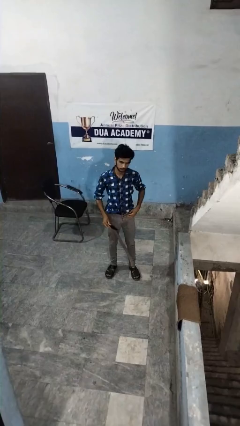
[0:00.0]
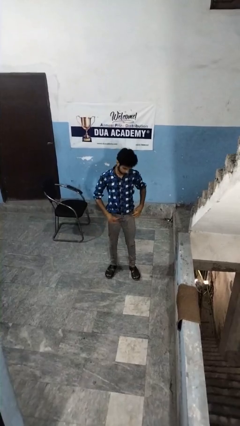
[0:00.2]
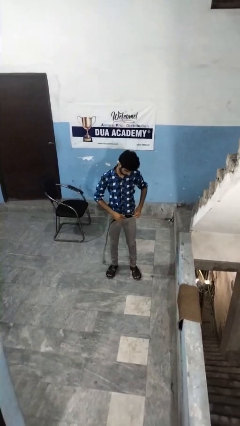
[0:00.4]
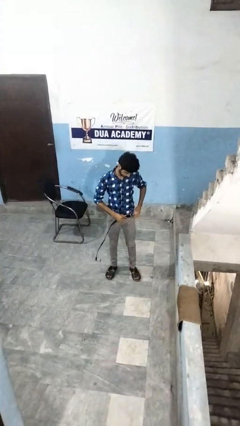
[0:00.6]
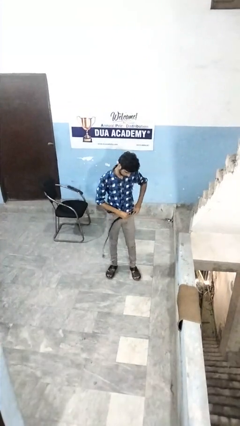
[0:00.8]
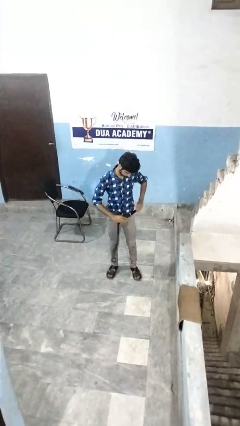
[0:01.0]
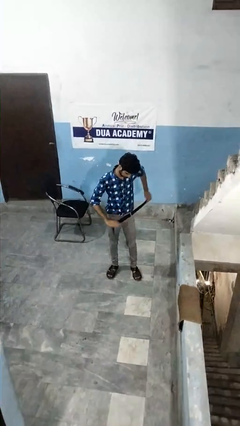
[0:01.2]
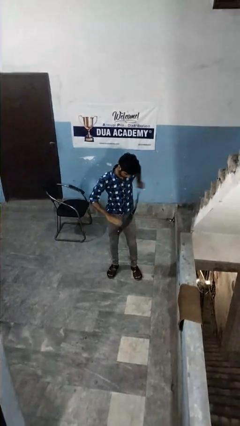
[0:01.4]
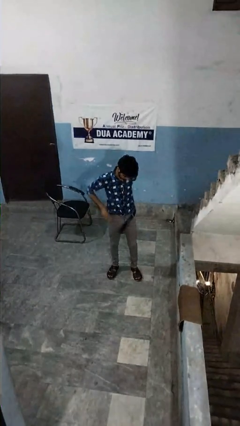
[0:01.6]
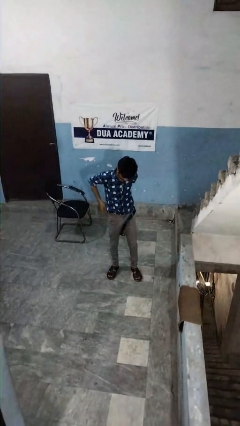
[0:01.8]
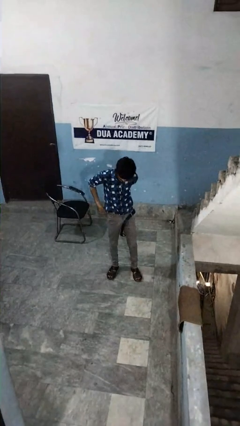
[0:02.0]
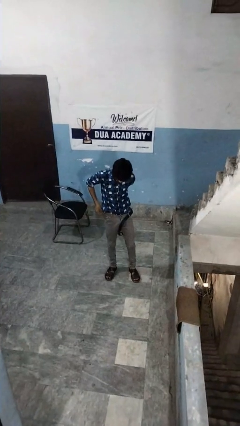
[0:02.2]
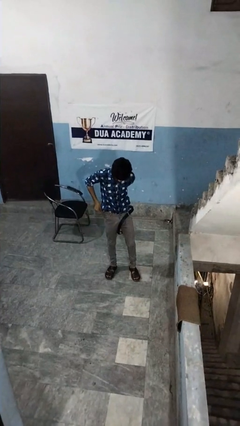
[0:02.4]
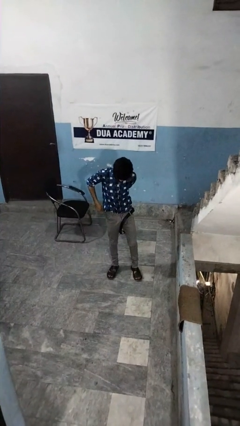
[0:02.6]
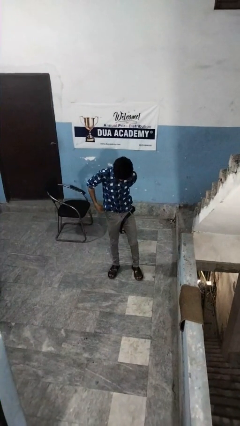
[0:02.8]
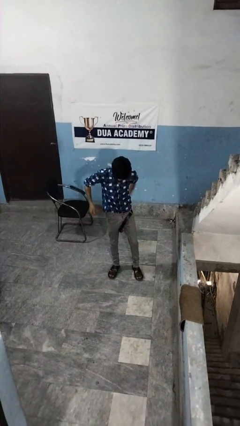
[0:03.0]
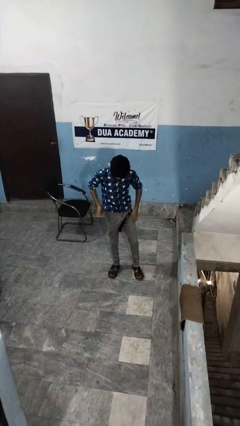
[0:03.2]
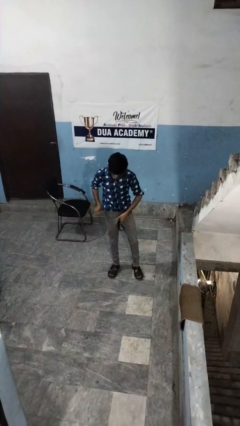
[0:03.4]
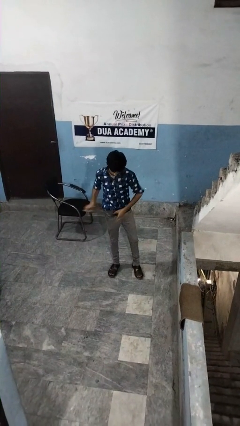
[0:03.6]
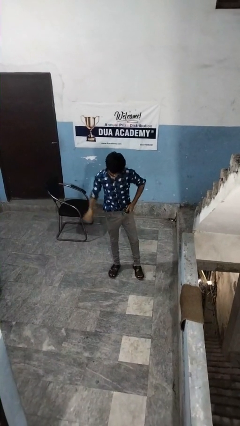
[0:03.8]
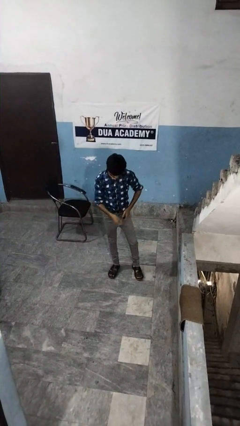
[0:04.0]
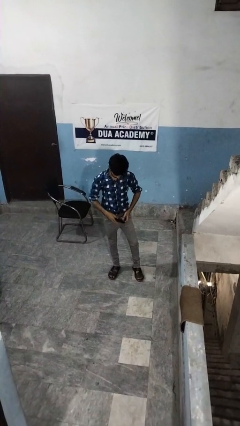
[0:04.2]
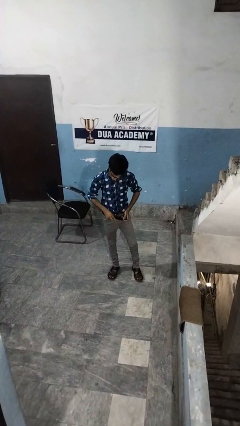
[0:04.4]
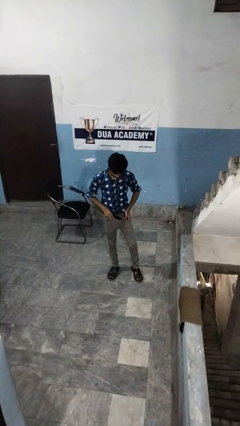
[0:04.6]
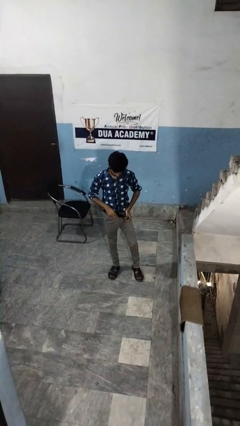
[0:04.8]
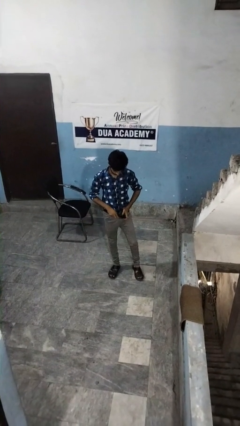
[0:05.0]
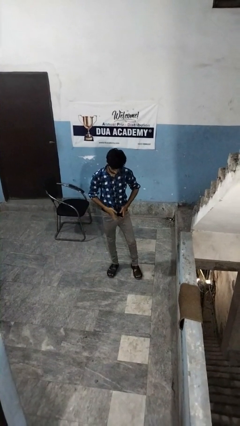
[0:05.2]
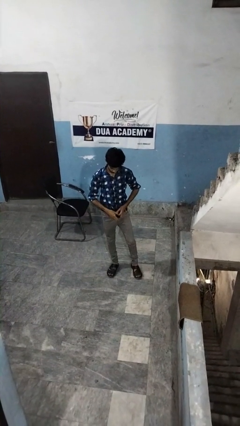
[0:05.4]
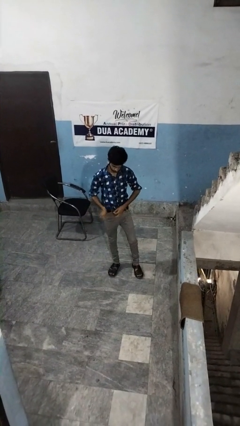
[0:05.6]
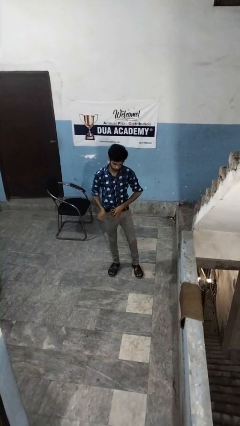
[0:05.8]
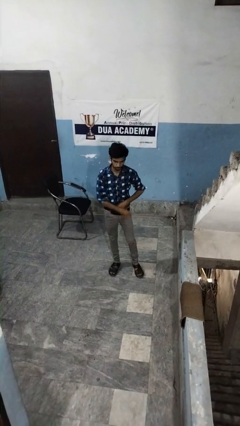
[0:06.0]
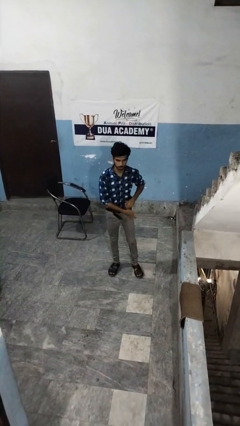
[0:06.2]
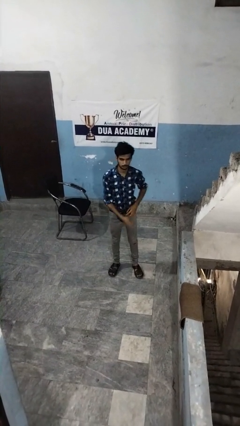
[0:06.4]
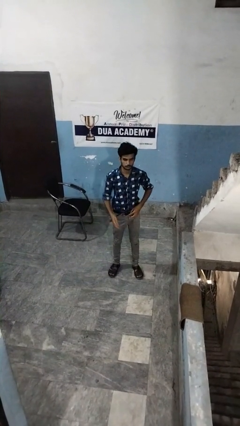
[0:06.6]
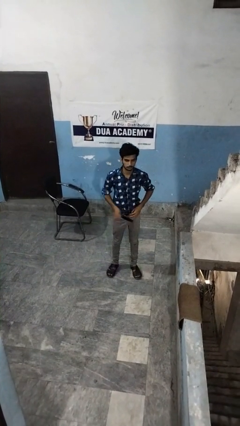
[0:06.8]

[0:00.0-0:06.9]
person puts on belt

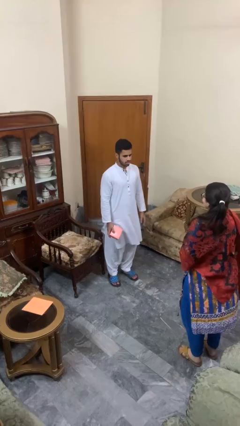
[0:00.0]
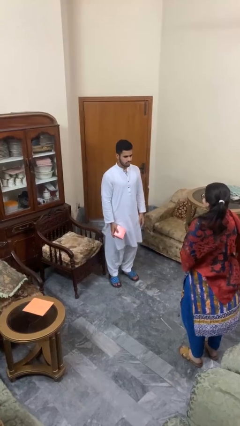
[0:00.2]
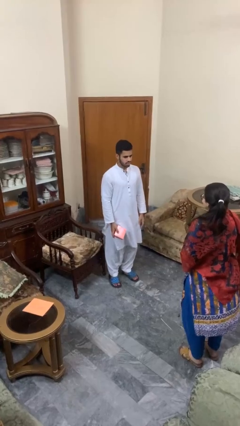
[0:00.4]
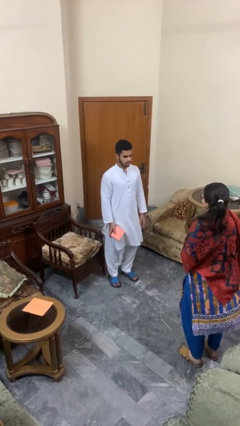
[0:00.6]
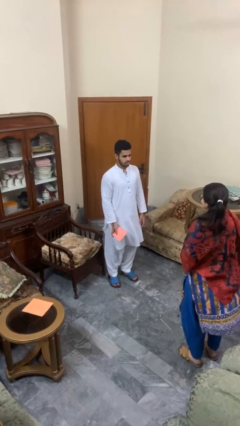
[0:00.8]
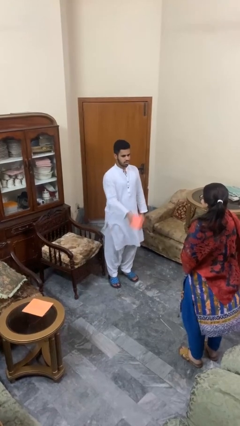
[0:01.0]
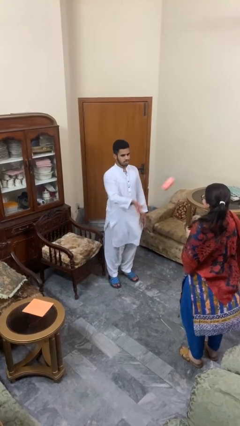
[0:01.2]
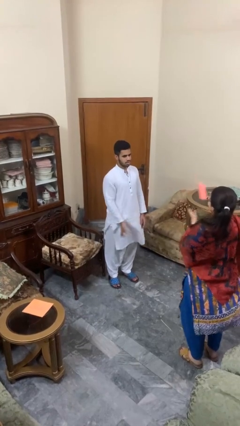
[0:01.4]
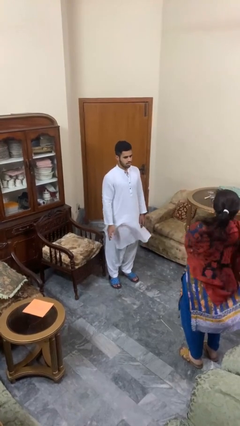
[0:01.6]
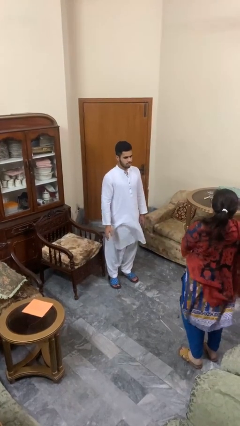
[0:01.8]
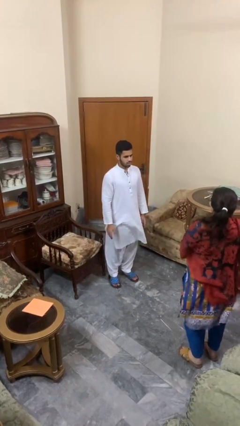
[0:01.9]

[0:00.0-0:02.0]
person throws object to person

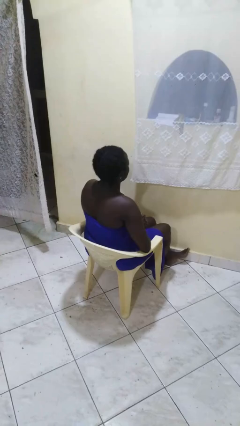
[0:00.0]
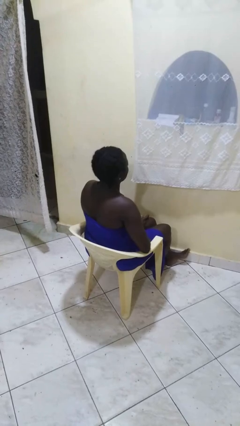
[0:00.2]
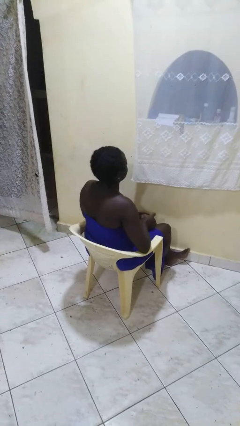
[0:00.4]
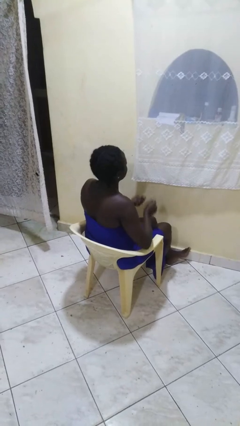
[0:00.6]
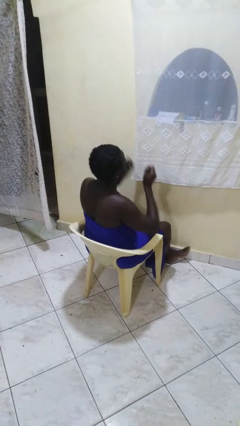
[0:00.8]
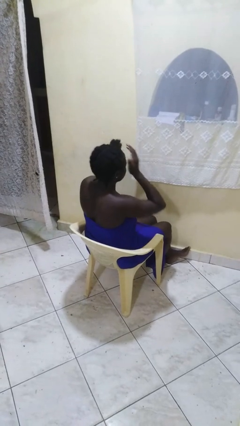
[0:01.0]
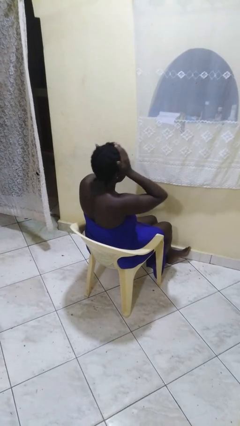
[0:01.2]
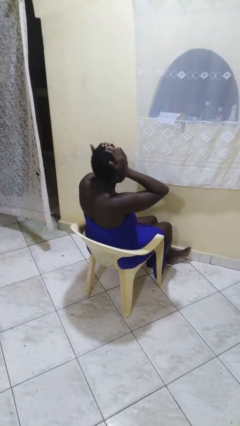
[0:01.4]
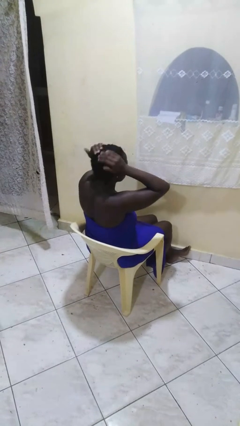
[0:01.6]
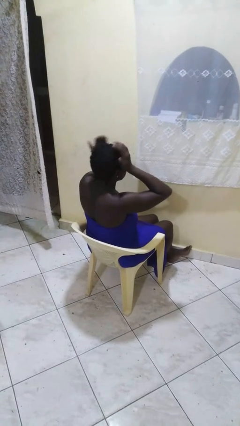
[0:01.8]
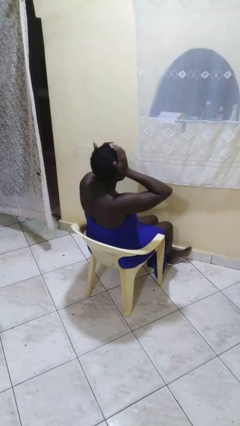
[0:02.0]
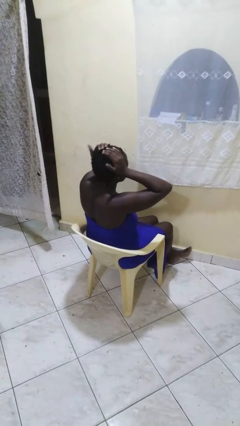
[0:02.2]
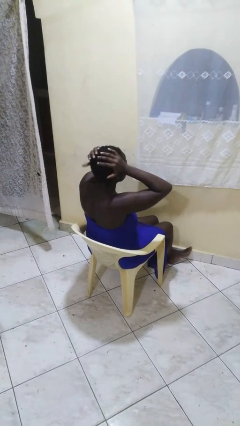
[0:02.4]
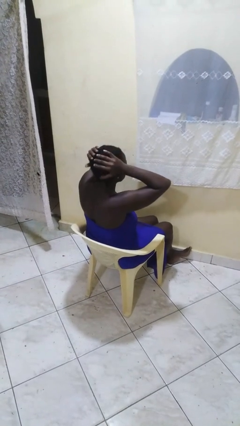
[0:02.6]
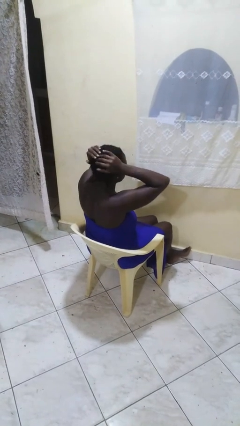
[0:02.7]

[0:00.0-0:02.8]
person strokes hair

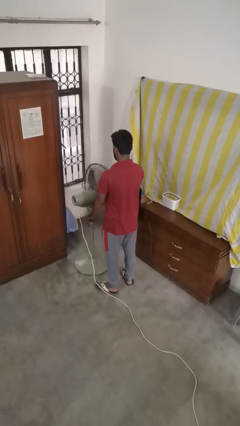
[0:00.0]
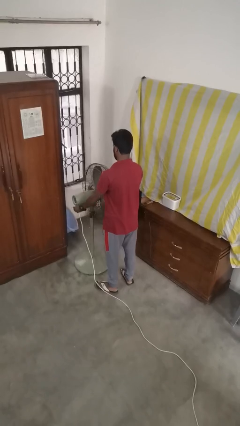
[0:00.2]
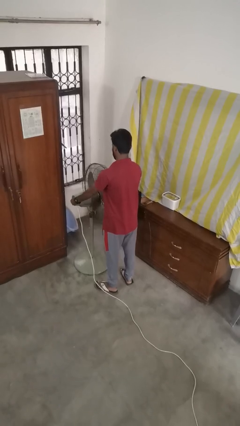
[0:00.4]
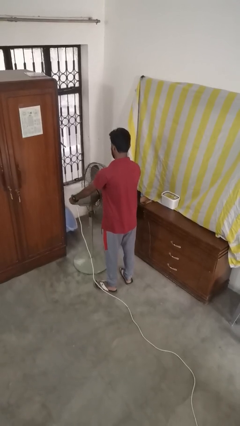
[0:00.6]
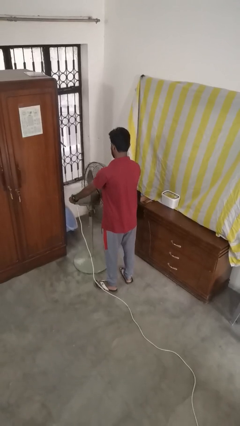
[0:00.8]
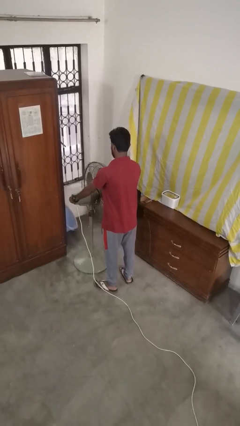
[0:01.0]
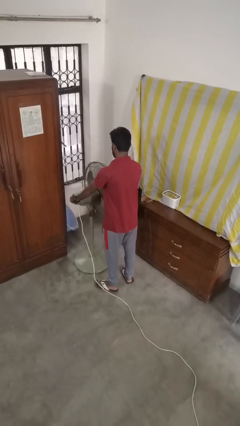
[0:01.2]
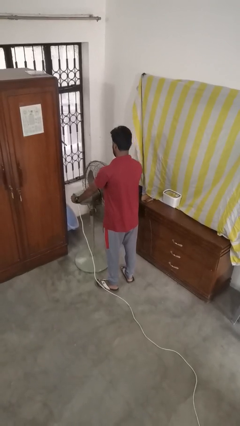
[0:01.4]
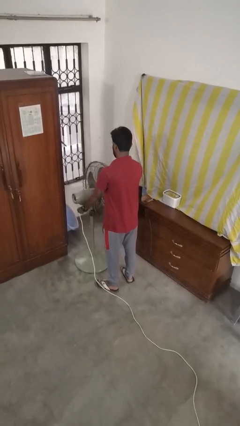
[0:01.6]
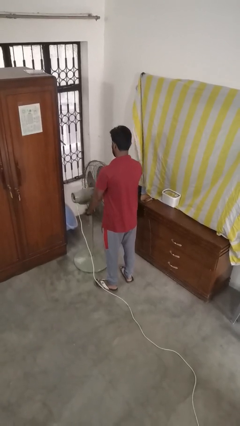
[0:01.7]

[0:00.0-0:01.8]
person turns off fan

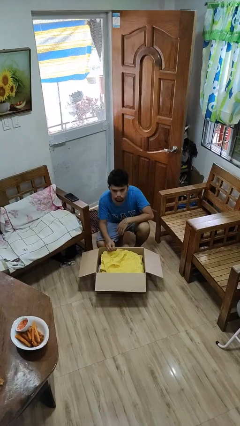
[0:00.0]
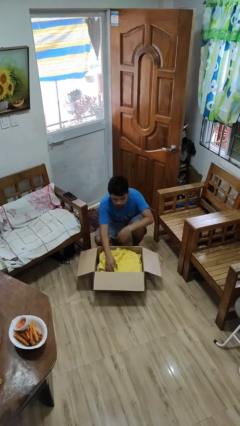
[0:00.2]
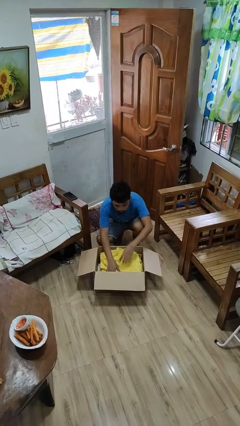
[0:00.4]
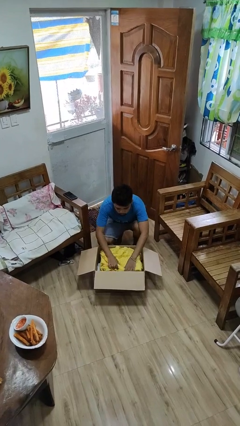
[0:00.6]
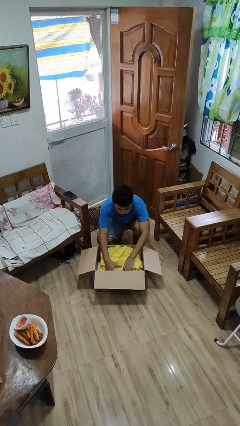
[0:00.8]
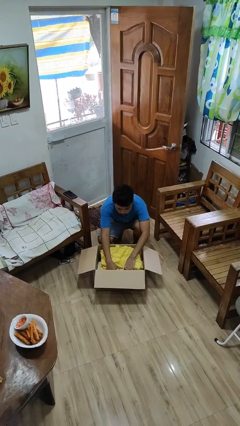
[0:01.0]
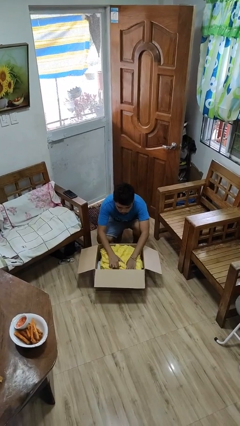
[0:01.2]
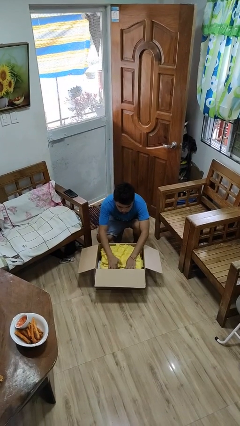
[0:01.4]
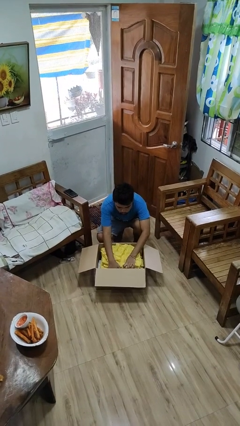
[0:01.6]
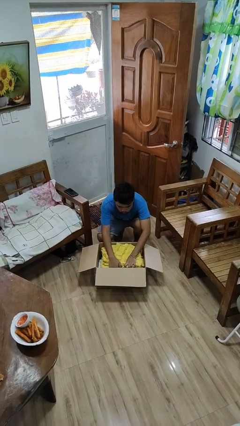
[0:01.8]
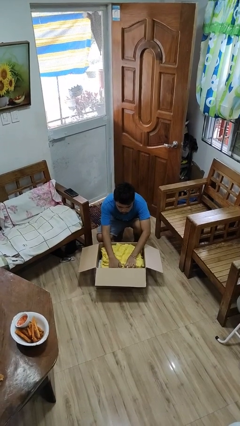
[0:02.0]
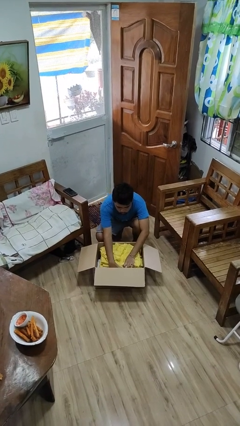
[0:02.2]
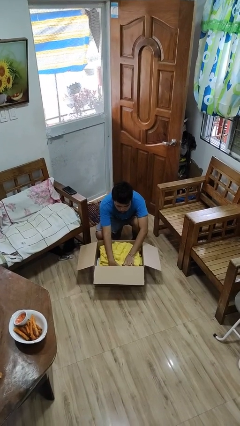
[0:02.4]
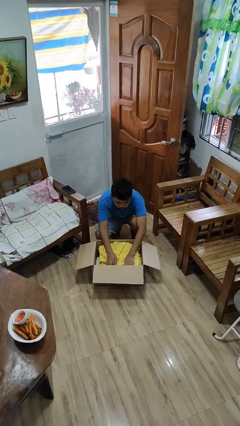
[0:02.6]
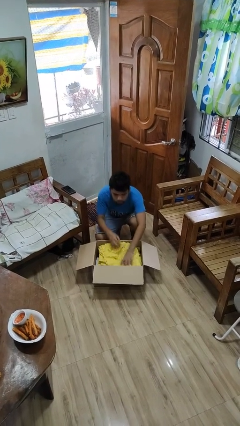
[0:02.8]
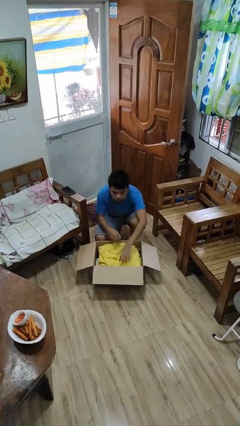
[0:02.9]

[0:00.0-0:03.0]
person searches in box

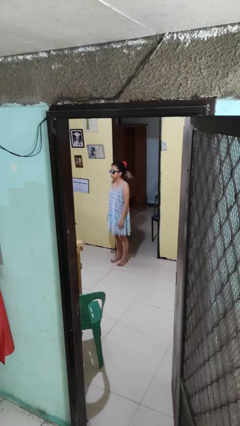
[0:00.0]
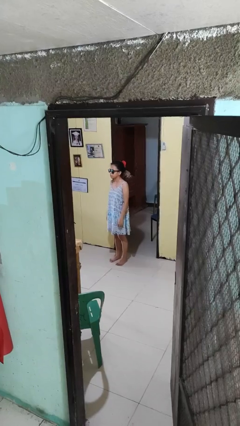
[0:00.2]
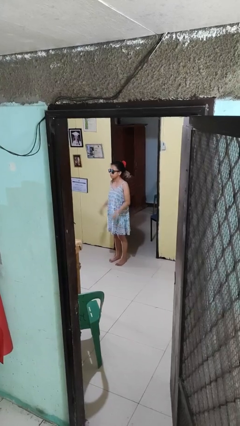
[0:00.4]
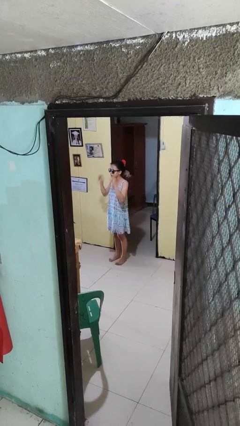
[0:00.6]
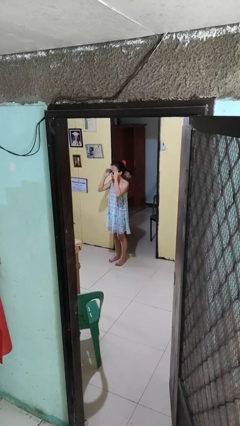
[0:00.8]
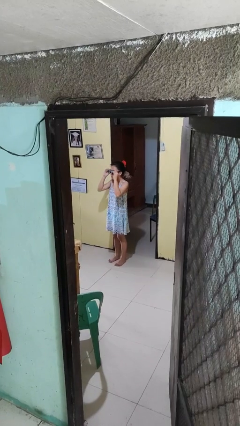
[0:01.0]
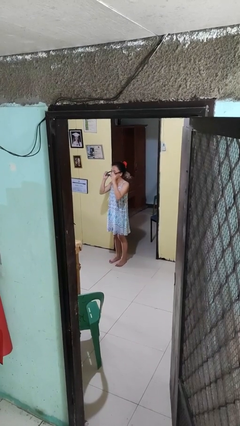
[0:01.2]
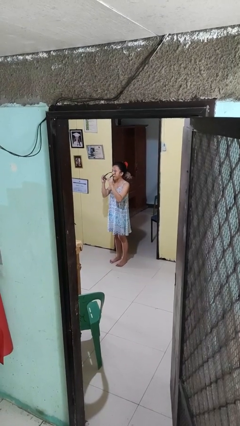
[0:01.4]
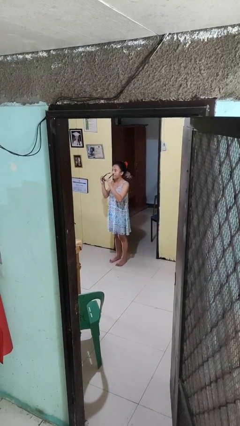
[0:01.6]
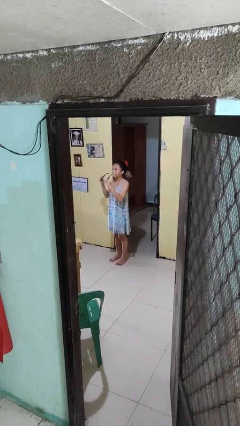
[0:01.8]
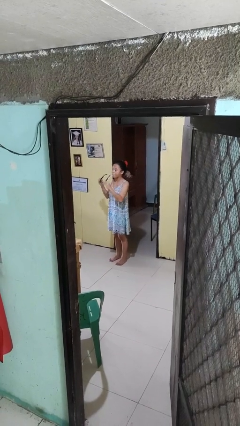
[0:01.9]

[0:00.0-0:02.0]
person takes off sunglasses
